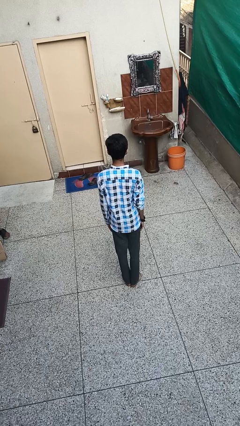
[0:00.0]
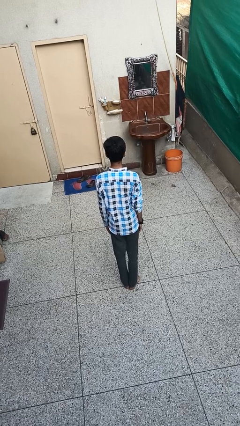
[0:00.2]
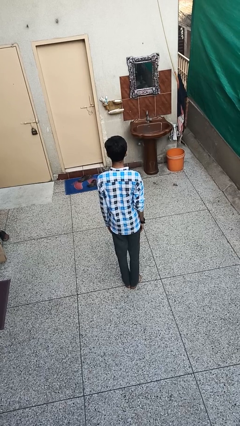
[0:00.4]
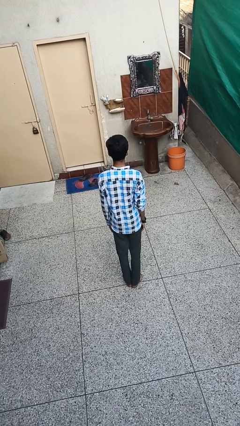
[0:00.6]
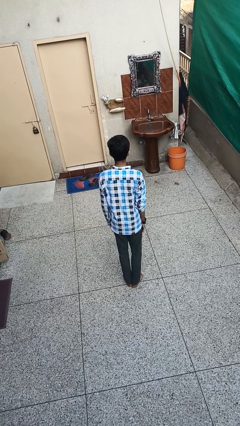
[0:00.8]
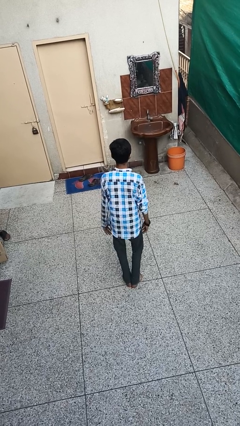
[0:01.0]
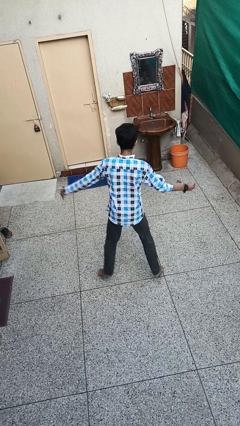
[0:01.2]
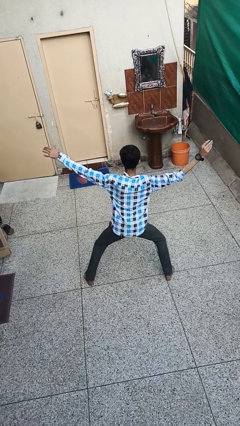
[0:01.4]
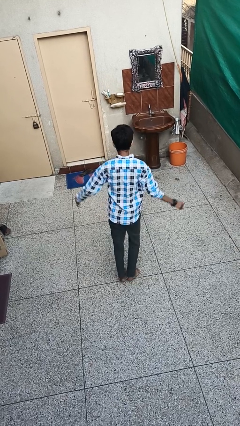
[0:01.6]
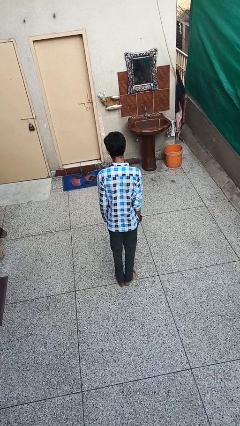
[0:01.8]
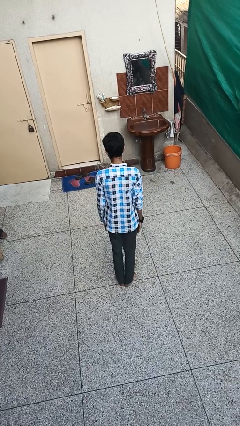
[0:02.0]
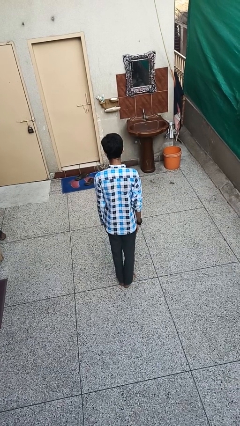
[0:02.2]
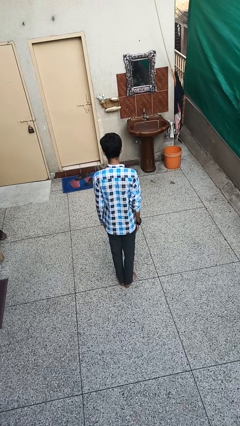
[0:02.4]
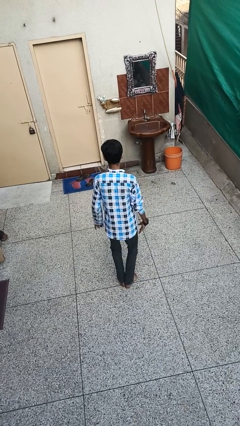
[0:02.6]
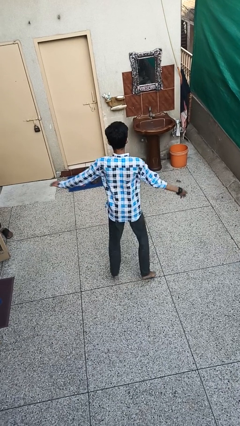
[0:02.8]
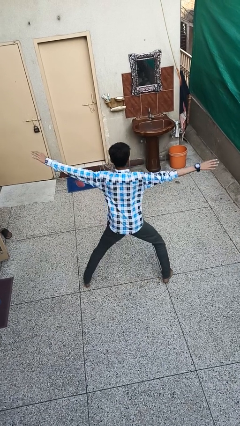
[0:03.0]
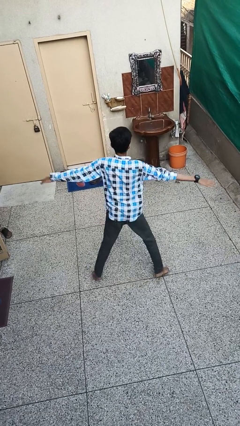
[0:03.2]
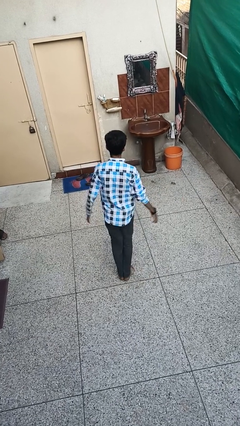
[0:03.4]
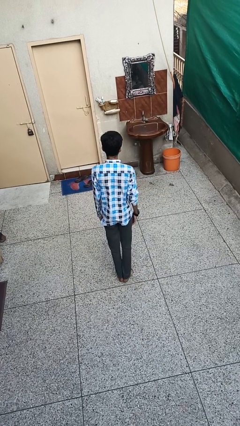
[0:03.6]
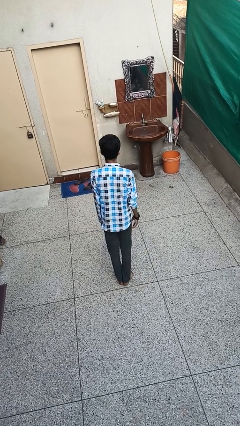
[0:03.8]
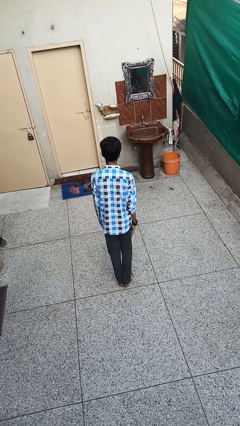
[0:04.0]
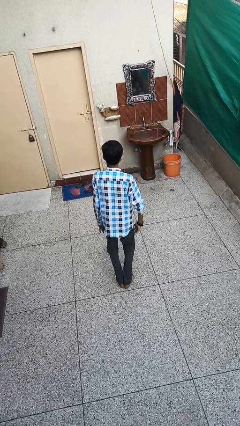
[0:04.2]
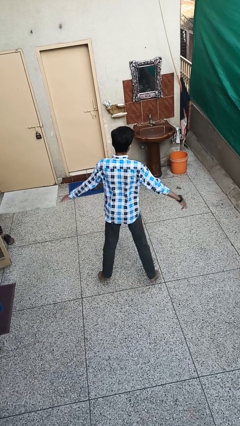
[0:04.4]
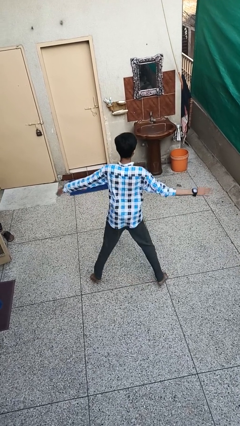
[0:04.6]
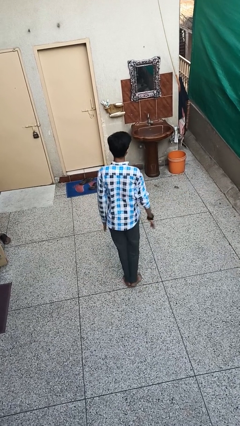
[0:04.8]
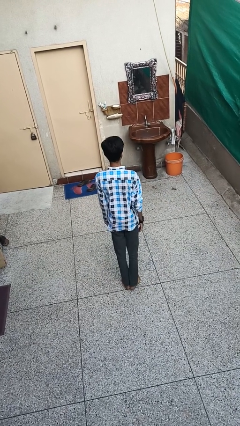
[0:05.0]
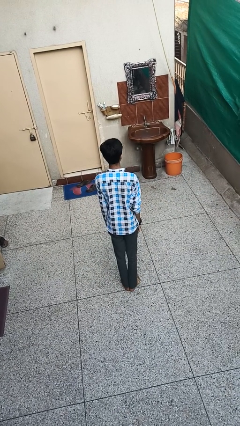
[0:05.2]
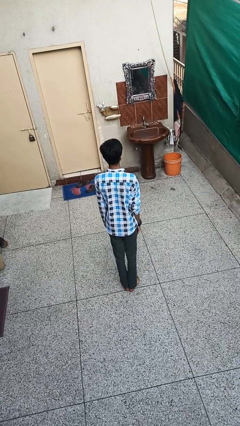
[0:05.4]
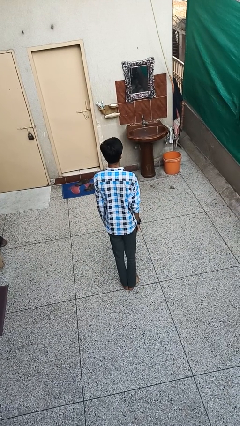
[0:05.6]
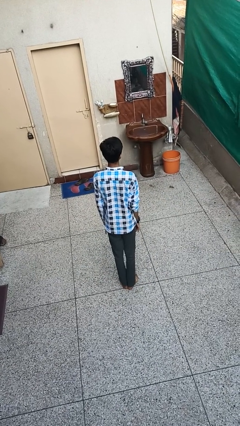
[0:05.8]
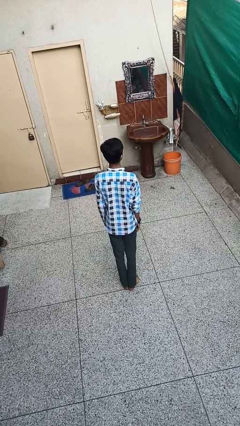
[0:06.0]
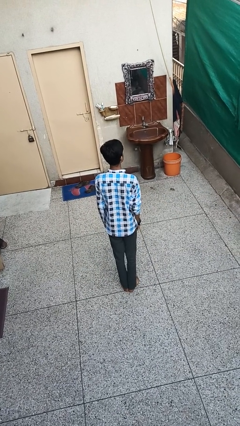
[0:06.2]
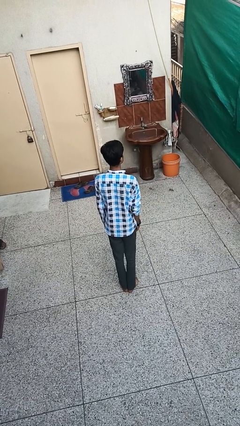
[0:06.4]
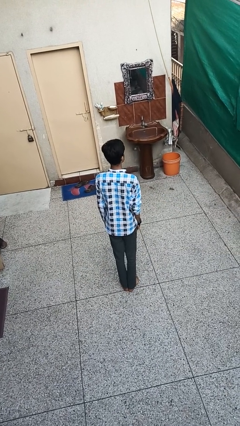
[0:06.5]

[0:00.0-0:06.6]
person exercises with jumping jacks

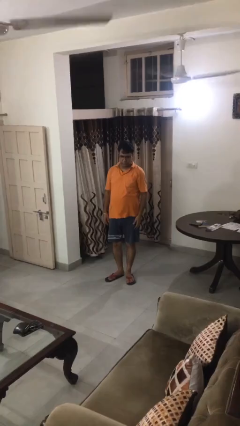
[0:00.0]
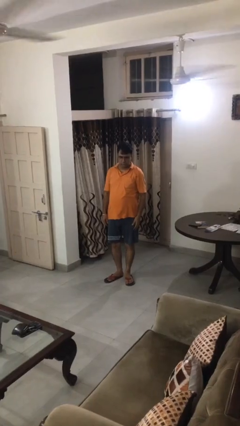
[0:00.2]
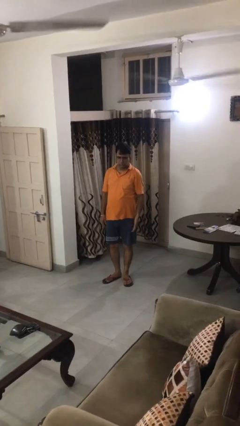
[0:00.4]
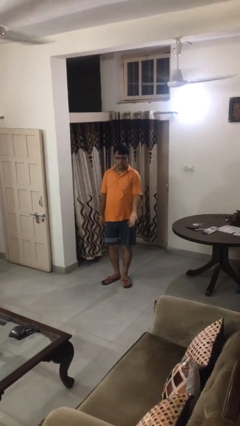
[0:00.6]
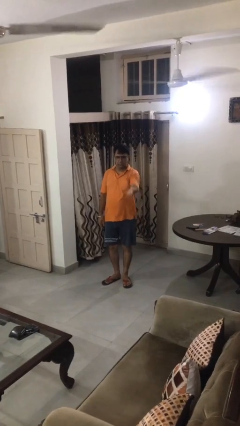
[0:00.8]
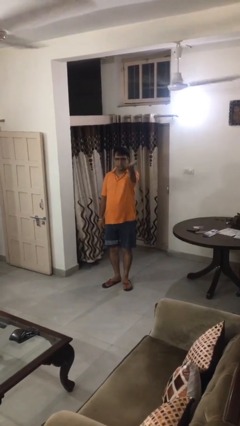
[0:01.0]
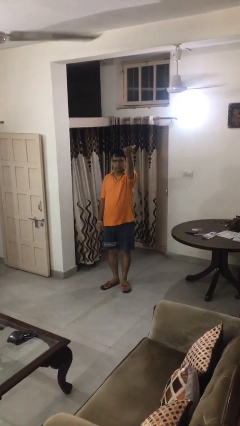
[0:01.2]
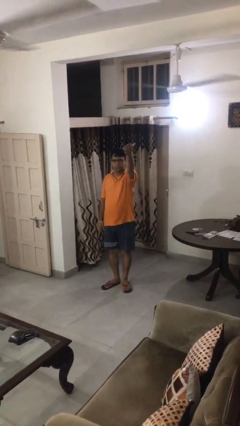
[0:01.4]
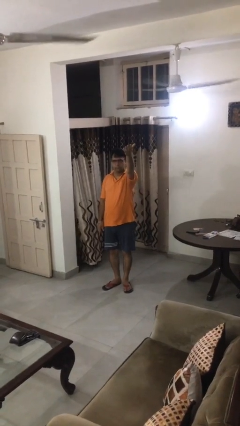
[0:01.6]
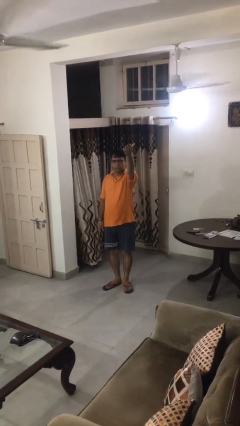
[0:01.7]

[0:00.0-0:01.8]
person gestures swipe up

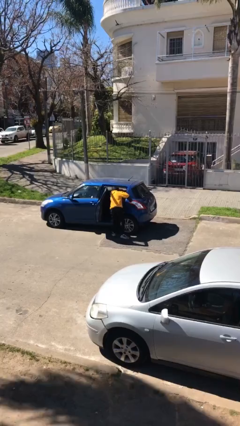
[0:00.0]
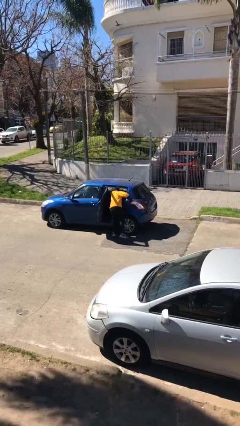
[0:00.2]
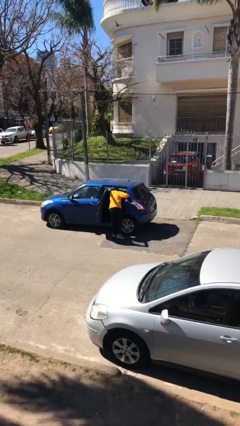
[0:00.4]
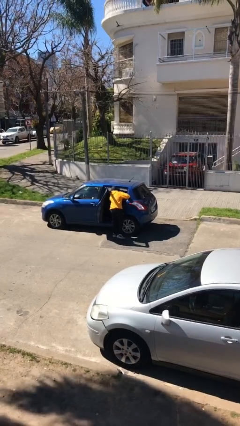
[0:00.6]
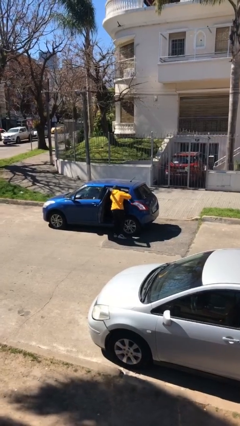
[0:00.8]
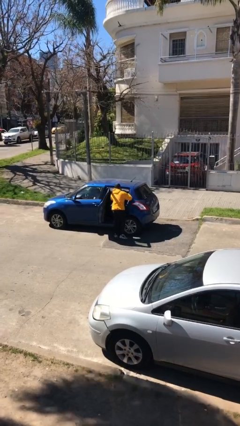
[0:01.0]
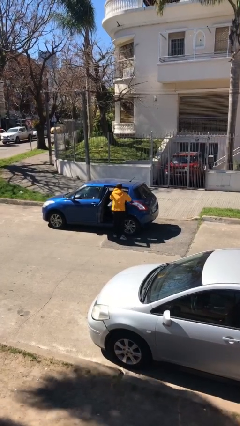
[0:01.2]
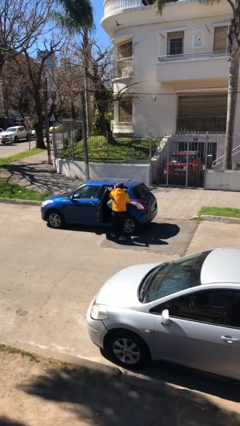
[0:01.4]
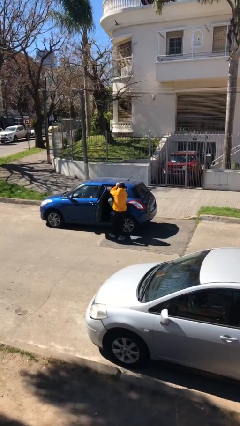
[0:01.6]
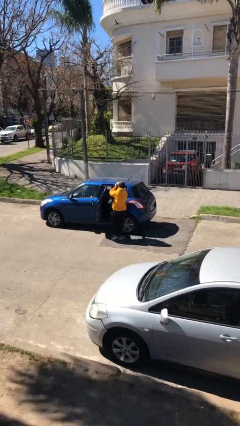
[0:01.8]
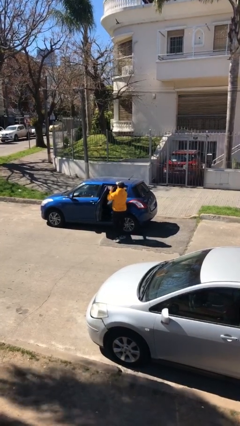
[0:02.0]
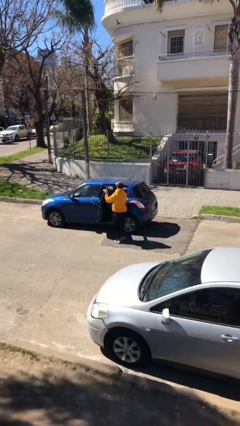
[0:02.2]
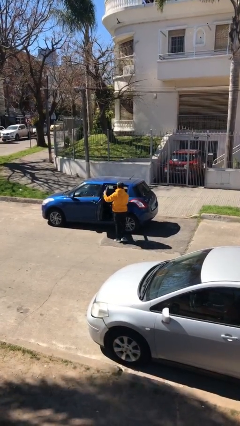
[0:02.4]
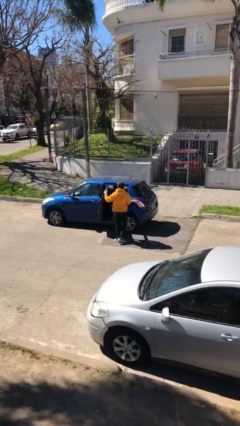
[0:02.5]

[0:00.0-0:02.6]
person unloads car

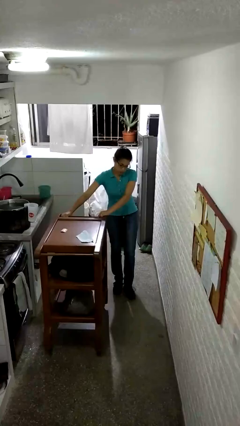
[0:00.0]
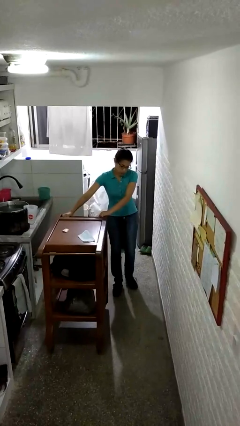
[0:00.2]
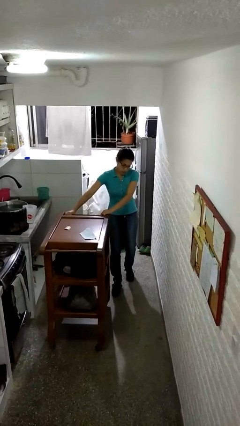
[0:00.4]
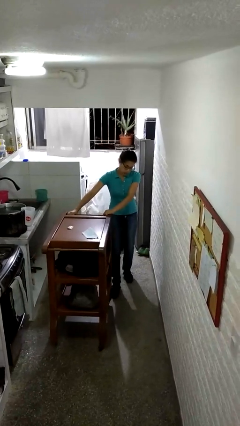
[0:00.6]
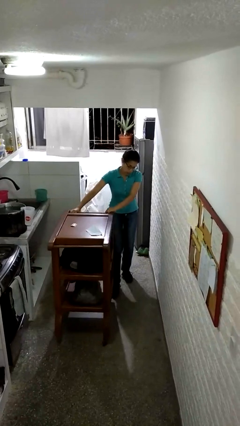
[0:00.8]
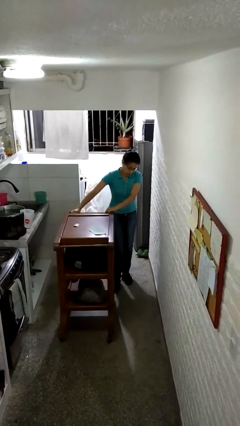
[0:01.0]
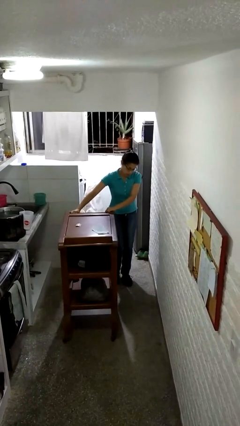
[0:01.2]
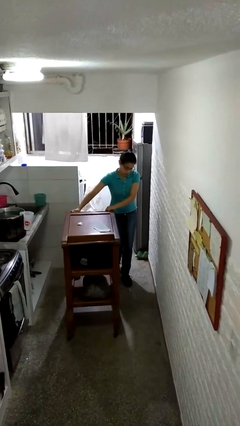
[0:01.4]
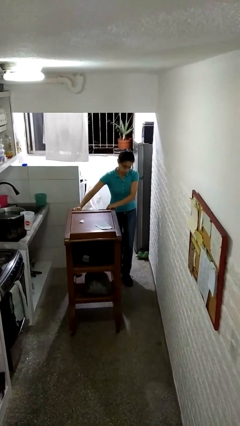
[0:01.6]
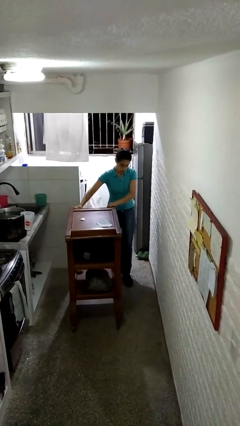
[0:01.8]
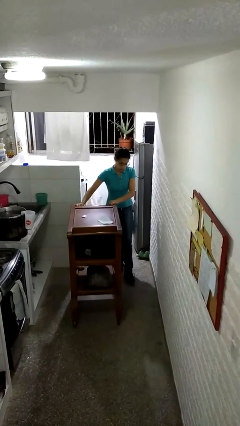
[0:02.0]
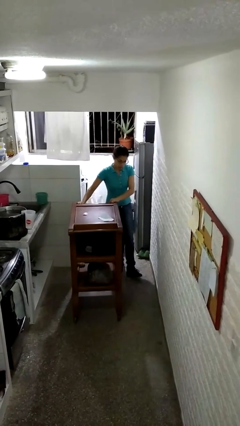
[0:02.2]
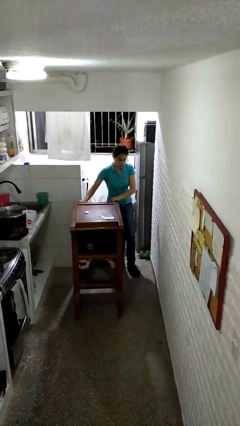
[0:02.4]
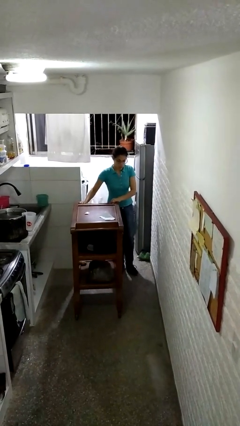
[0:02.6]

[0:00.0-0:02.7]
person pulls wheeled cart

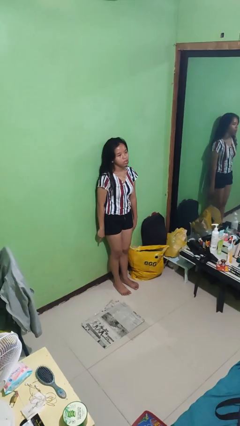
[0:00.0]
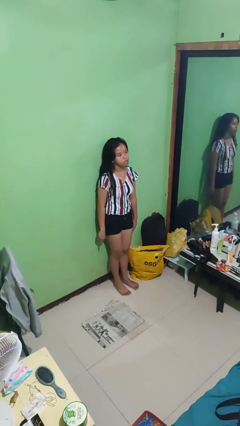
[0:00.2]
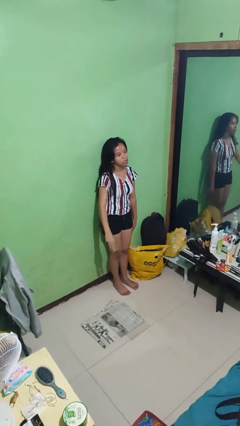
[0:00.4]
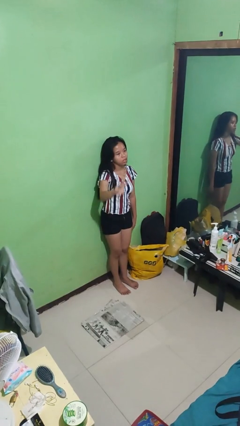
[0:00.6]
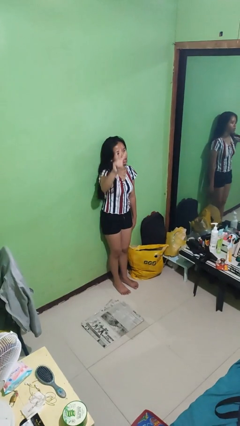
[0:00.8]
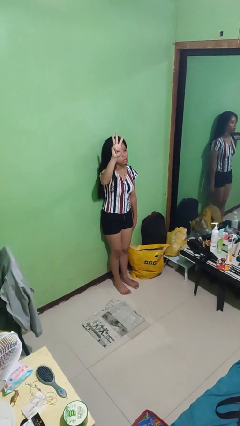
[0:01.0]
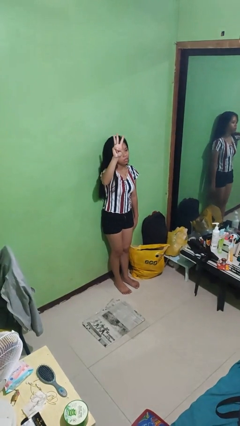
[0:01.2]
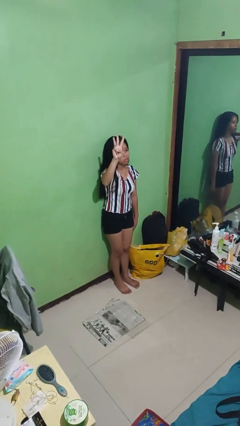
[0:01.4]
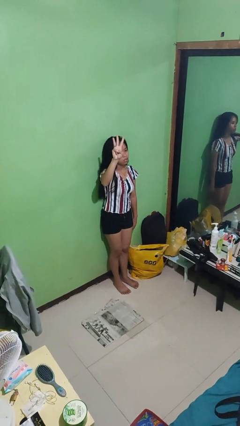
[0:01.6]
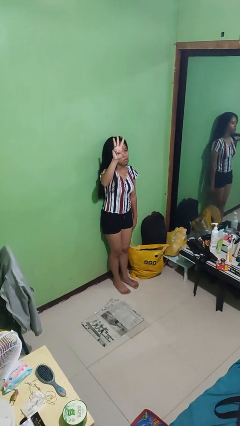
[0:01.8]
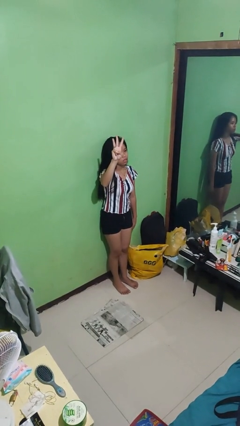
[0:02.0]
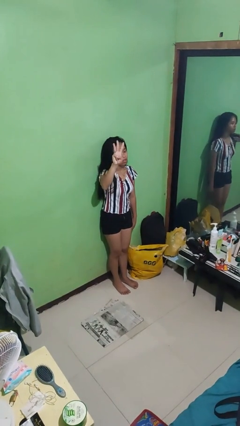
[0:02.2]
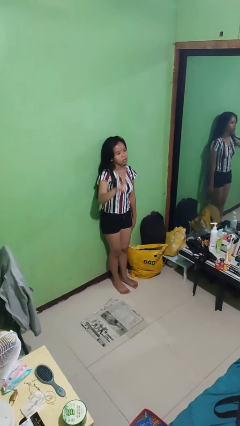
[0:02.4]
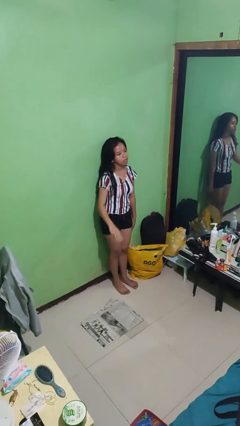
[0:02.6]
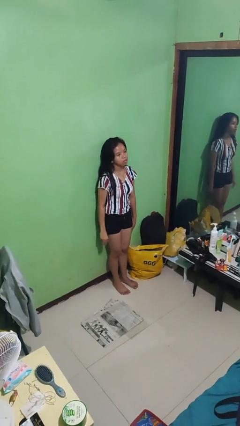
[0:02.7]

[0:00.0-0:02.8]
person gestures number three

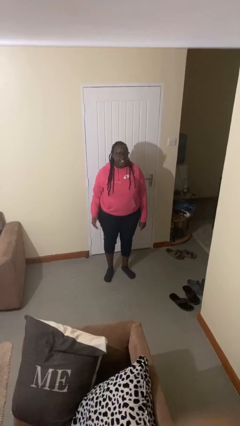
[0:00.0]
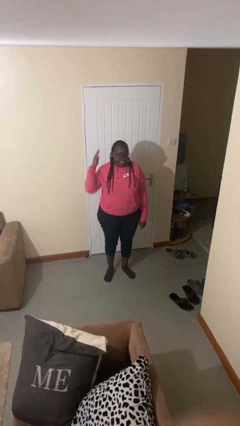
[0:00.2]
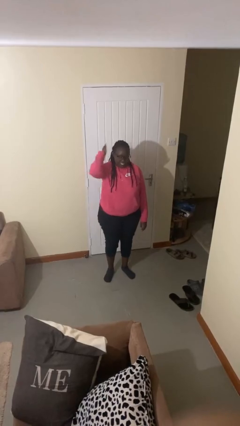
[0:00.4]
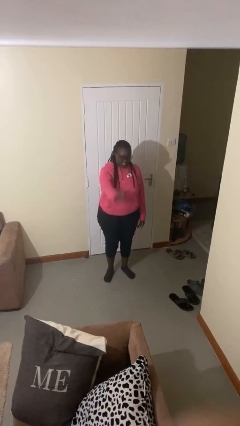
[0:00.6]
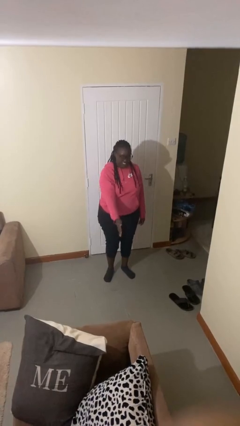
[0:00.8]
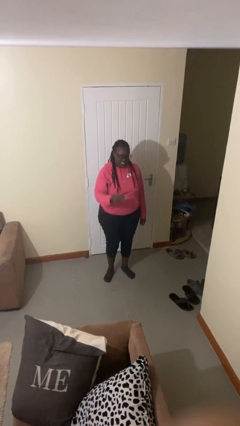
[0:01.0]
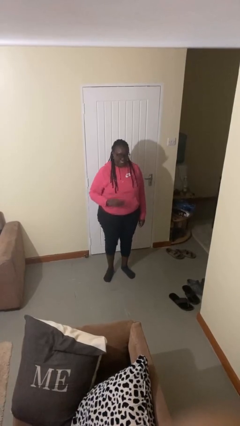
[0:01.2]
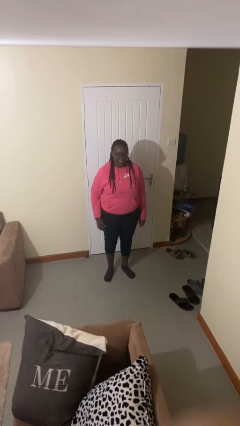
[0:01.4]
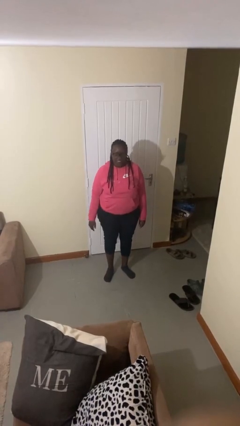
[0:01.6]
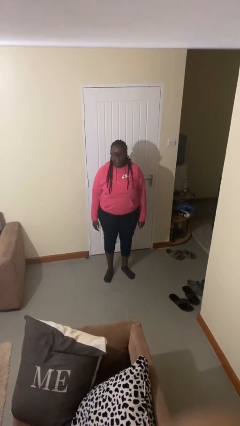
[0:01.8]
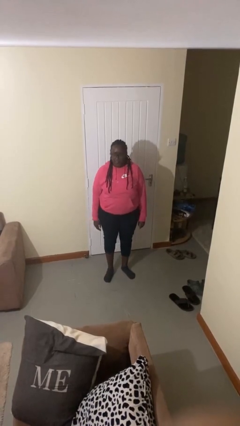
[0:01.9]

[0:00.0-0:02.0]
person karate chop
